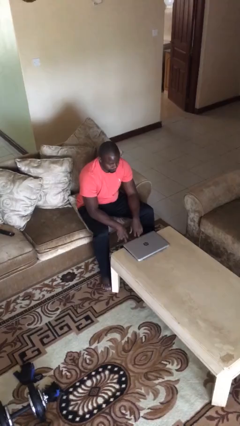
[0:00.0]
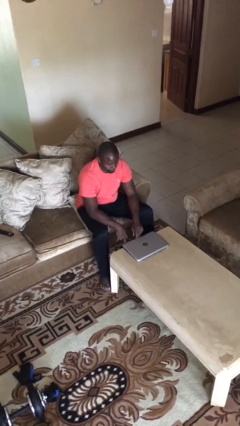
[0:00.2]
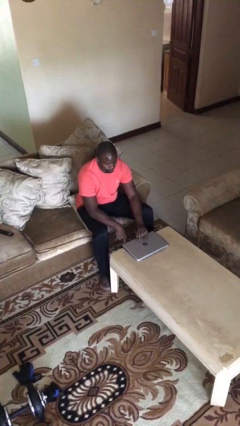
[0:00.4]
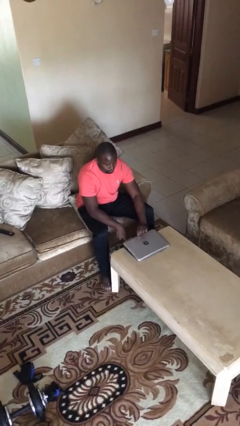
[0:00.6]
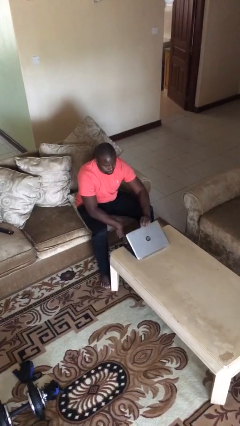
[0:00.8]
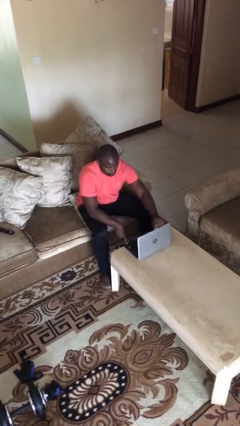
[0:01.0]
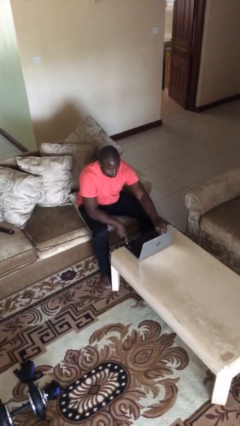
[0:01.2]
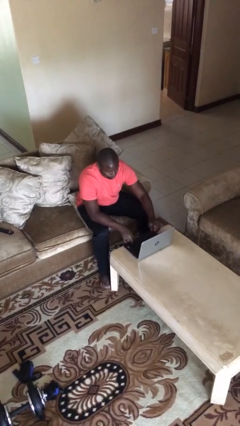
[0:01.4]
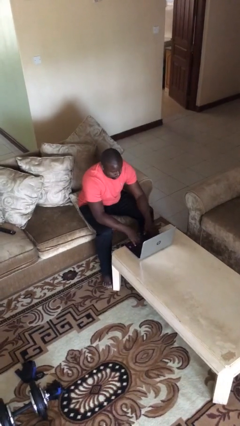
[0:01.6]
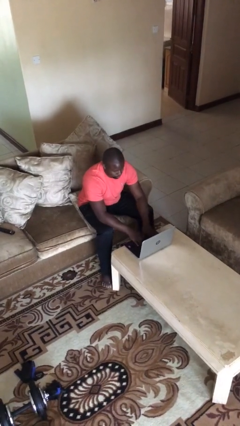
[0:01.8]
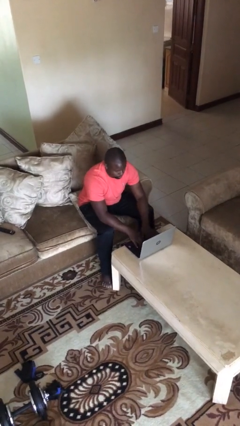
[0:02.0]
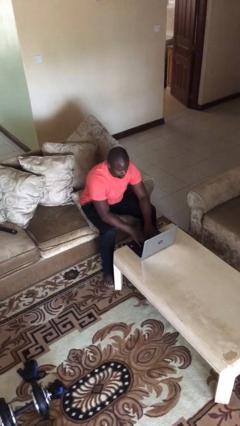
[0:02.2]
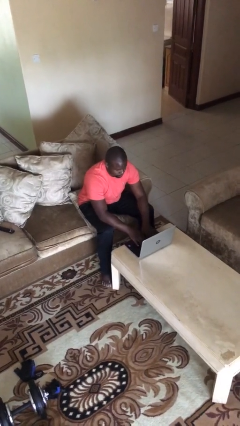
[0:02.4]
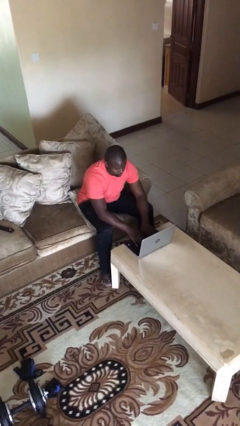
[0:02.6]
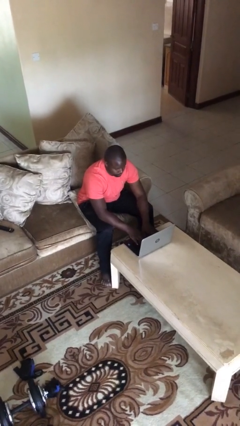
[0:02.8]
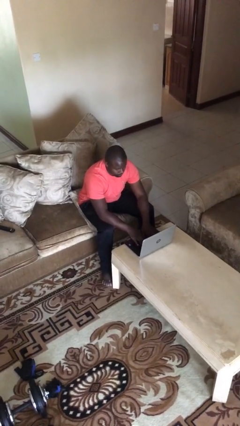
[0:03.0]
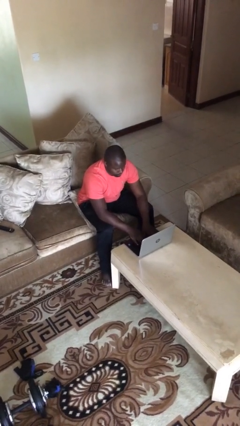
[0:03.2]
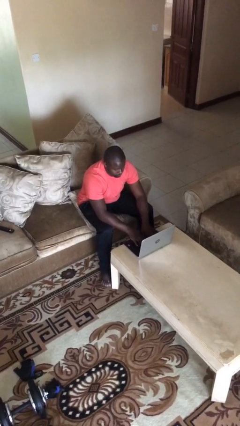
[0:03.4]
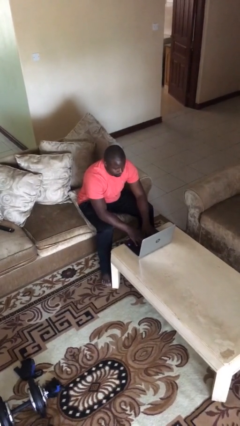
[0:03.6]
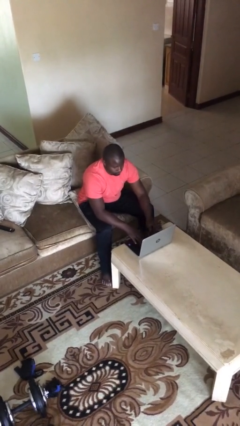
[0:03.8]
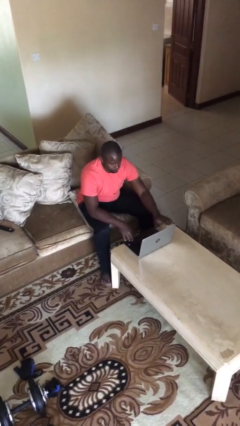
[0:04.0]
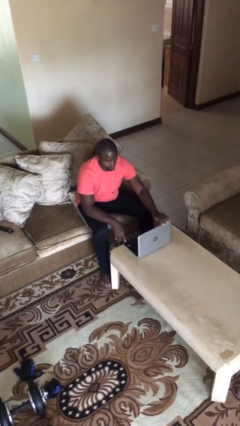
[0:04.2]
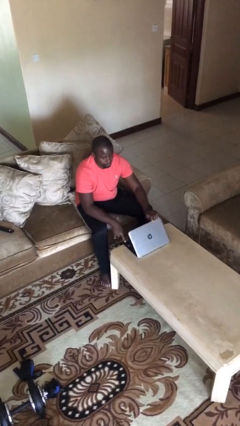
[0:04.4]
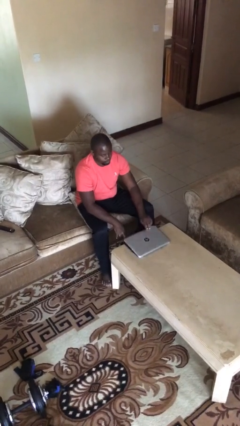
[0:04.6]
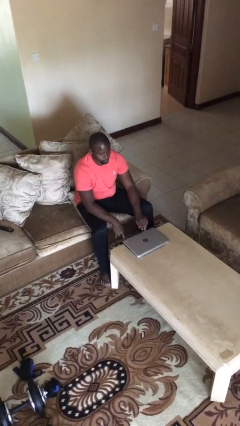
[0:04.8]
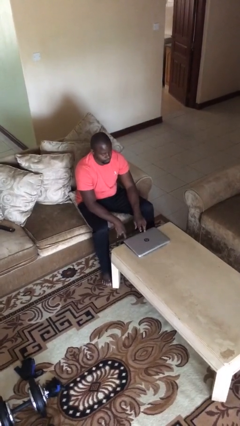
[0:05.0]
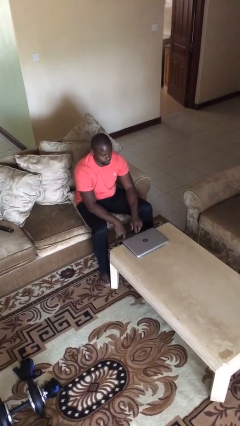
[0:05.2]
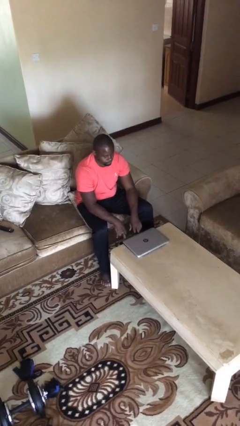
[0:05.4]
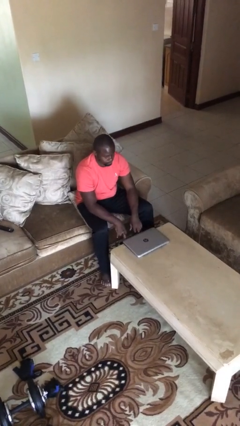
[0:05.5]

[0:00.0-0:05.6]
person interacts with laptop

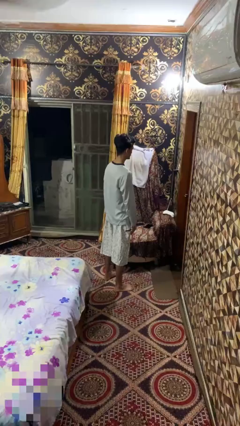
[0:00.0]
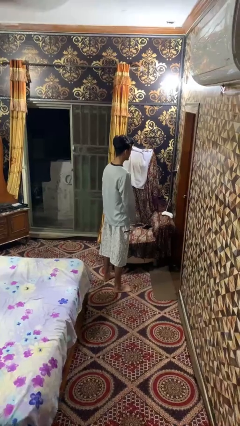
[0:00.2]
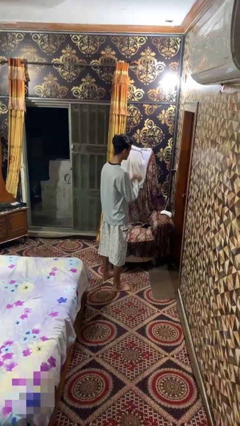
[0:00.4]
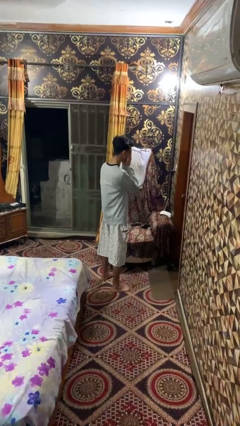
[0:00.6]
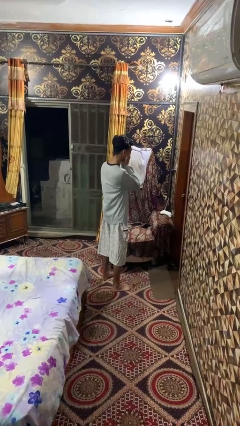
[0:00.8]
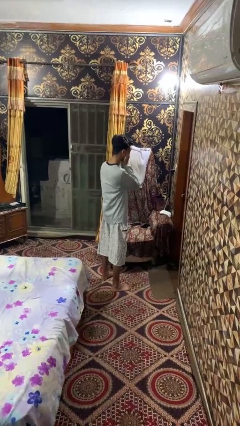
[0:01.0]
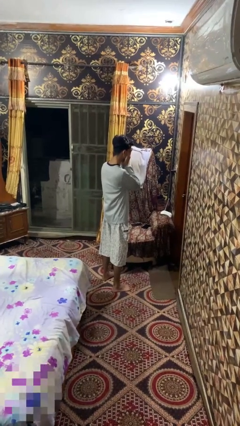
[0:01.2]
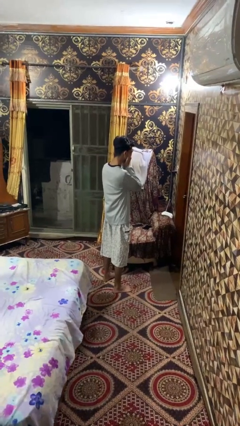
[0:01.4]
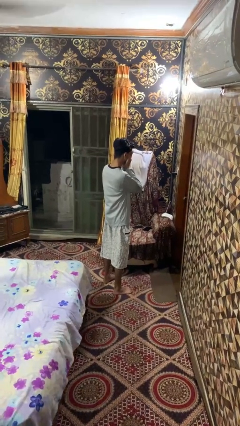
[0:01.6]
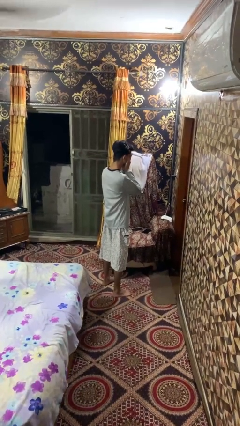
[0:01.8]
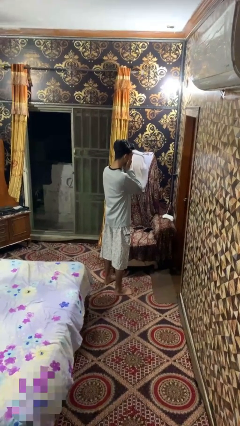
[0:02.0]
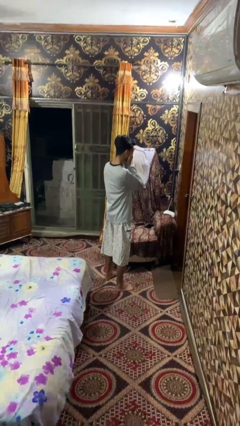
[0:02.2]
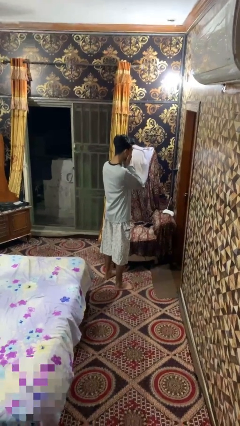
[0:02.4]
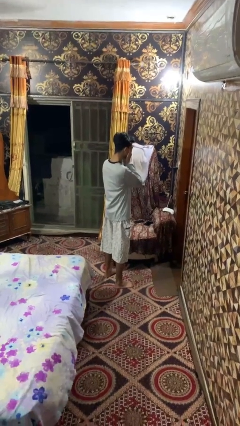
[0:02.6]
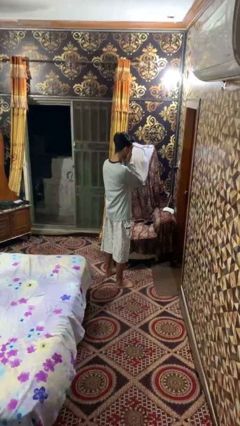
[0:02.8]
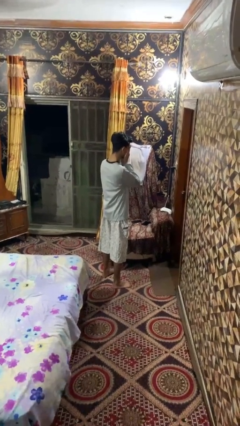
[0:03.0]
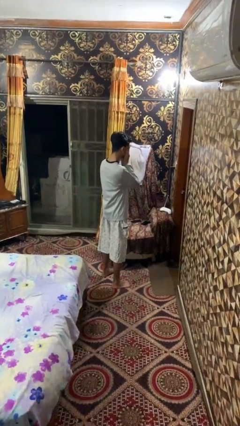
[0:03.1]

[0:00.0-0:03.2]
person covers face with hands

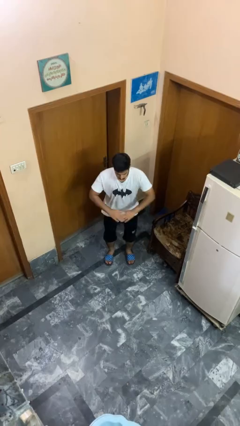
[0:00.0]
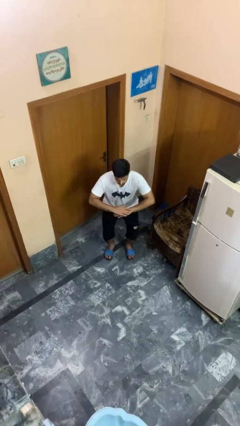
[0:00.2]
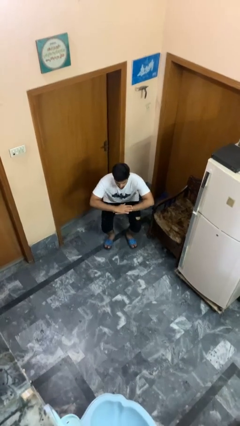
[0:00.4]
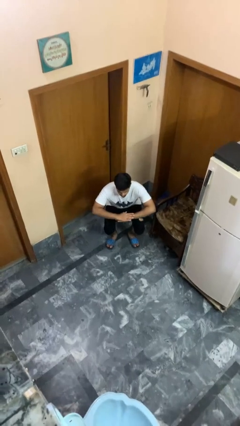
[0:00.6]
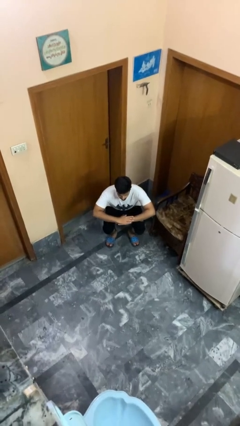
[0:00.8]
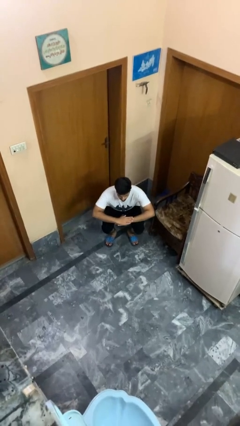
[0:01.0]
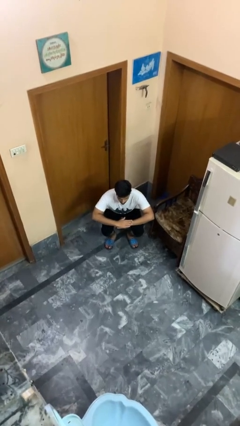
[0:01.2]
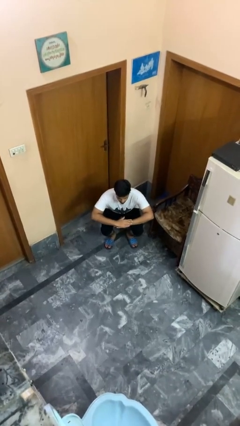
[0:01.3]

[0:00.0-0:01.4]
person squats

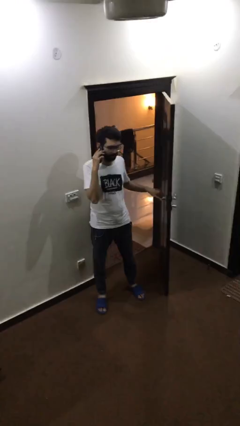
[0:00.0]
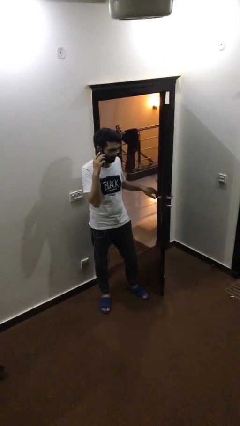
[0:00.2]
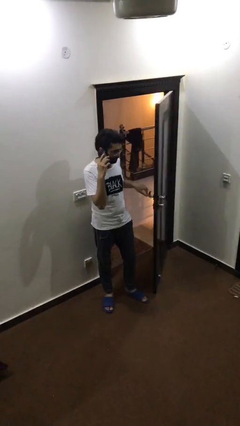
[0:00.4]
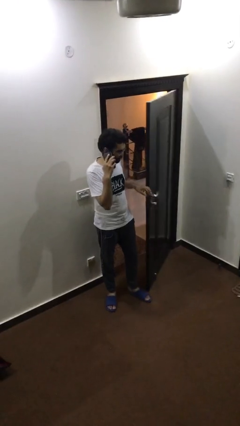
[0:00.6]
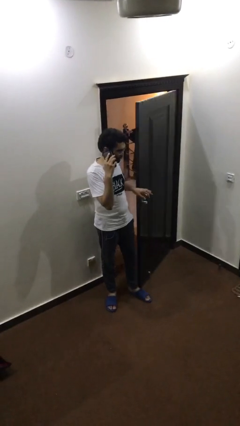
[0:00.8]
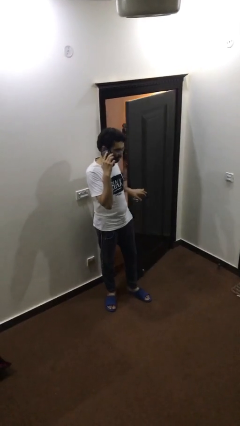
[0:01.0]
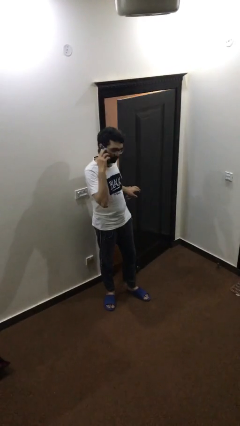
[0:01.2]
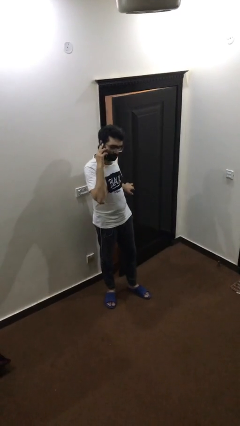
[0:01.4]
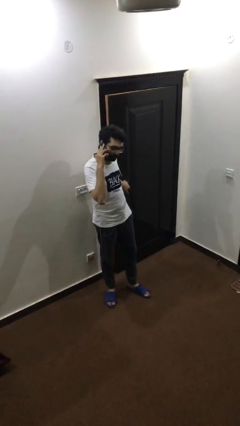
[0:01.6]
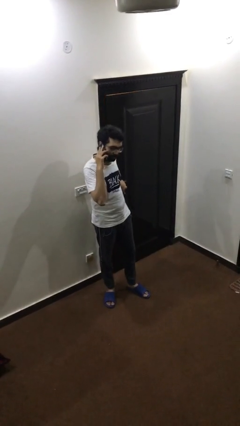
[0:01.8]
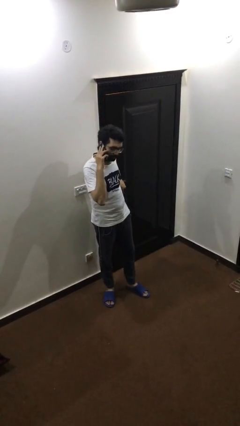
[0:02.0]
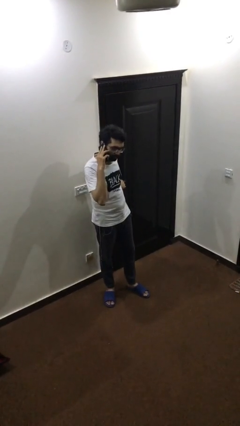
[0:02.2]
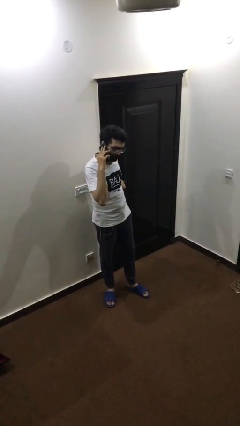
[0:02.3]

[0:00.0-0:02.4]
person closes facility door

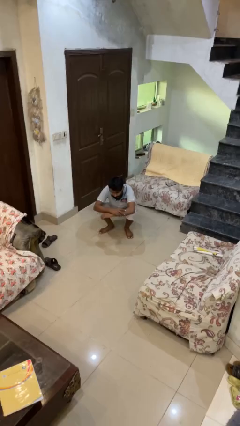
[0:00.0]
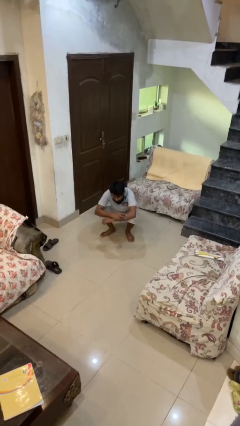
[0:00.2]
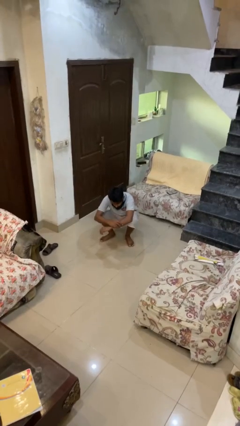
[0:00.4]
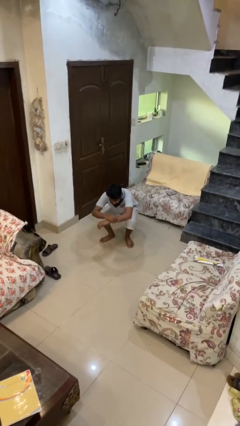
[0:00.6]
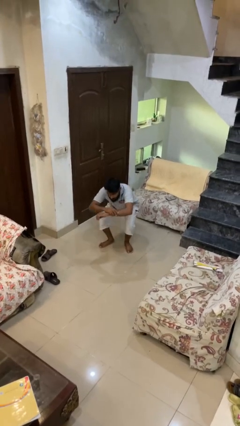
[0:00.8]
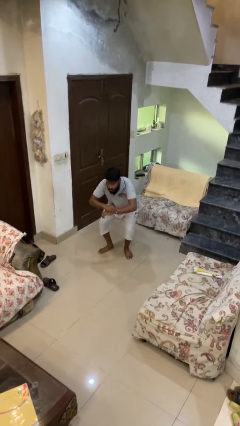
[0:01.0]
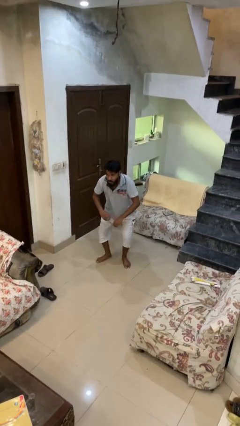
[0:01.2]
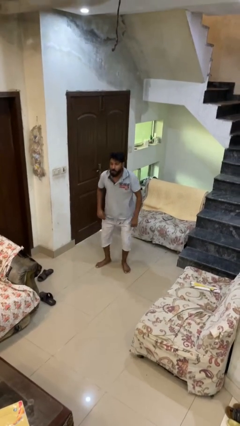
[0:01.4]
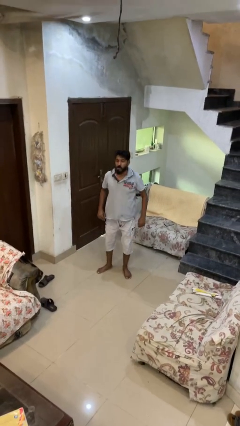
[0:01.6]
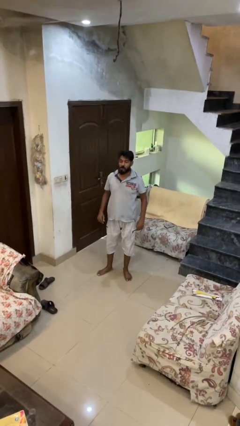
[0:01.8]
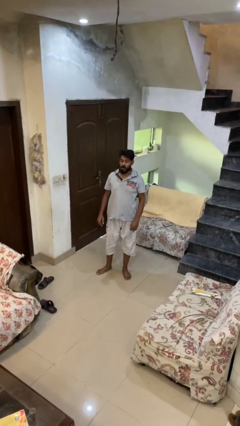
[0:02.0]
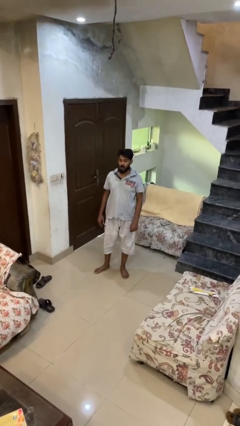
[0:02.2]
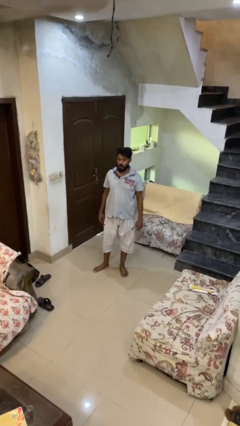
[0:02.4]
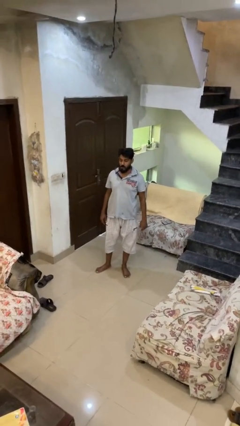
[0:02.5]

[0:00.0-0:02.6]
person stands up

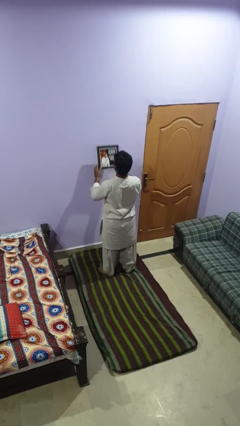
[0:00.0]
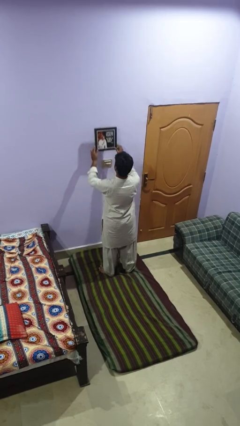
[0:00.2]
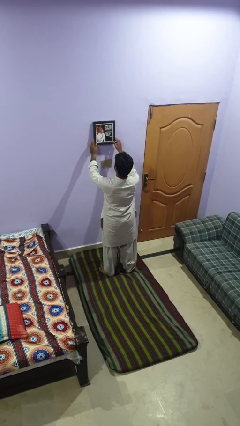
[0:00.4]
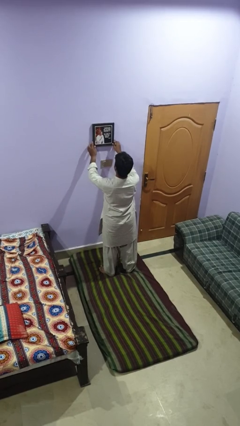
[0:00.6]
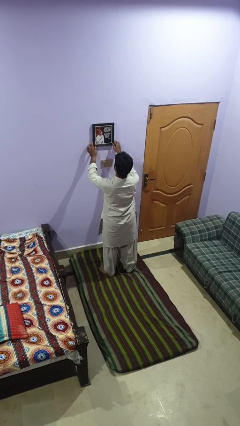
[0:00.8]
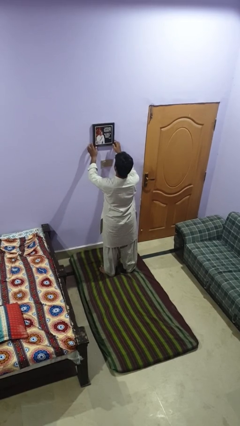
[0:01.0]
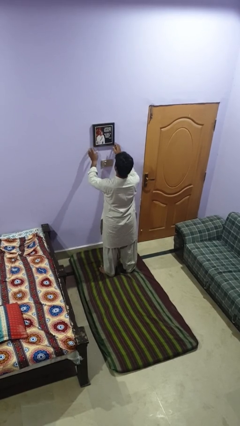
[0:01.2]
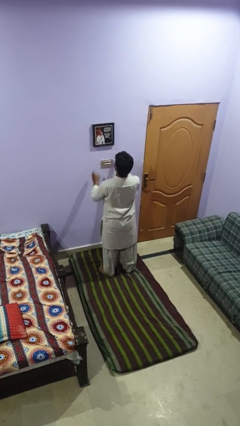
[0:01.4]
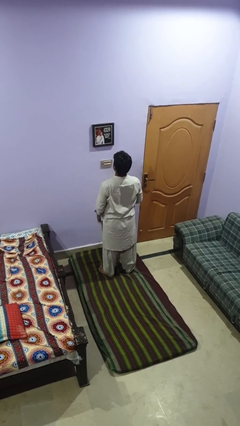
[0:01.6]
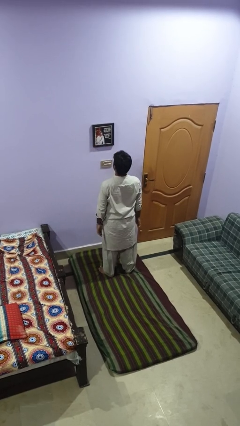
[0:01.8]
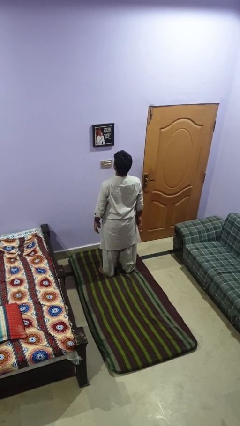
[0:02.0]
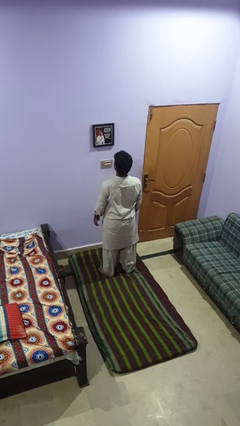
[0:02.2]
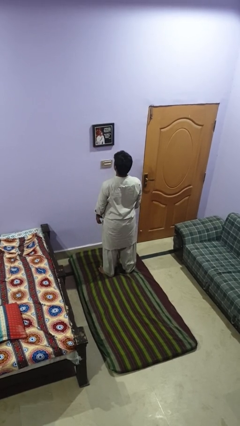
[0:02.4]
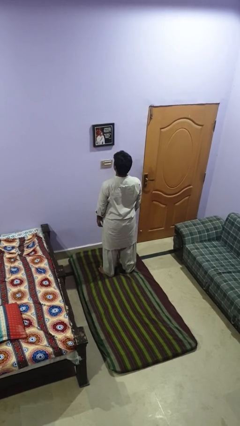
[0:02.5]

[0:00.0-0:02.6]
person puts up picture frame
